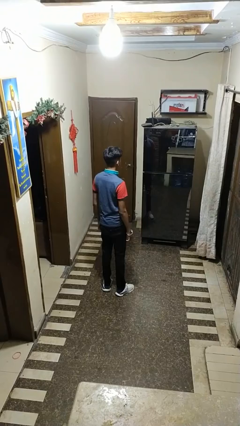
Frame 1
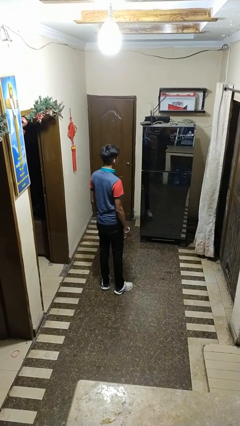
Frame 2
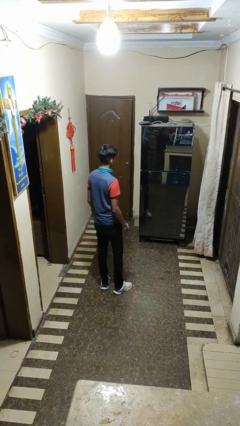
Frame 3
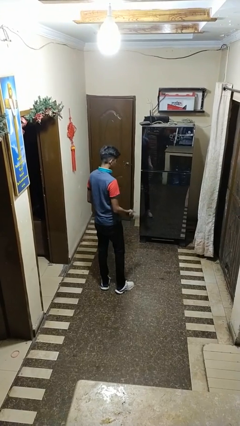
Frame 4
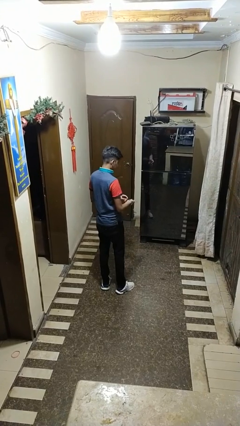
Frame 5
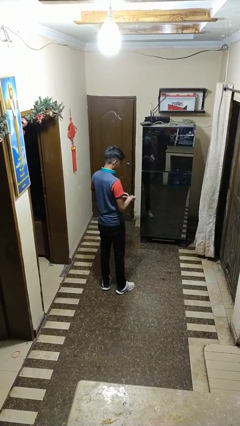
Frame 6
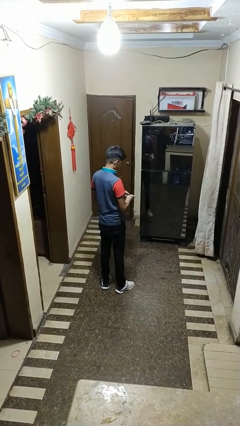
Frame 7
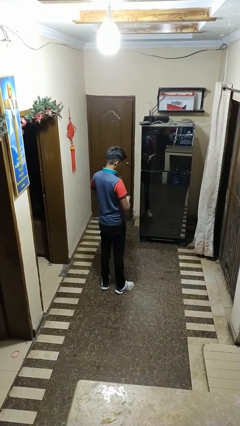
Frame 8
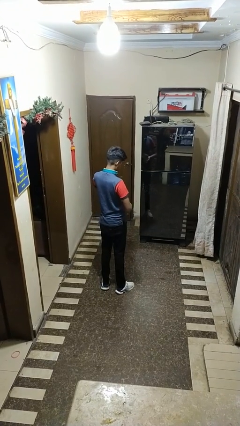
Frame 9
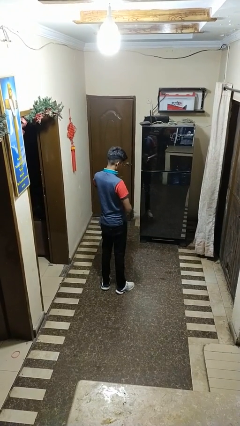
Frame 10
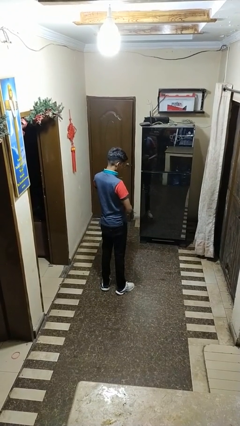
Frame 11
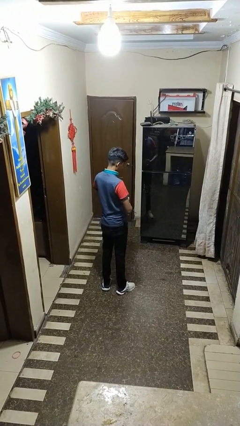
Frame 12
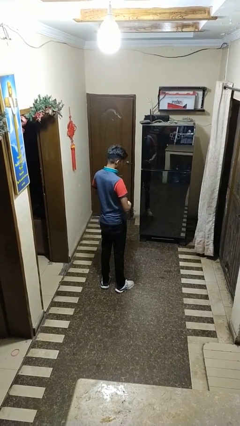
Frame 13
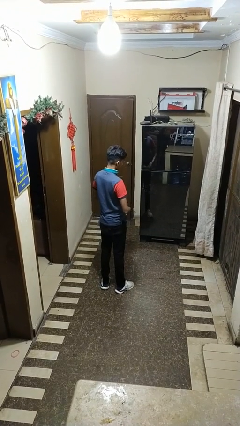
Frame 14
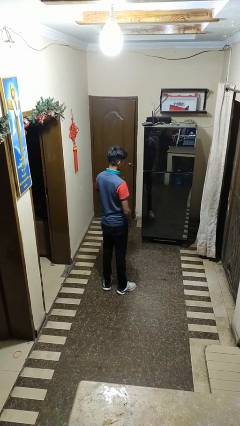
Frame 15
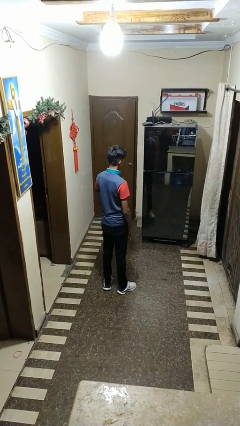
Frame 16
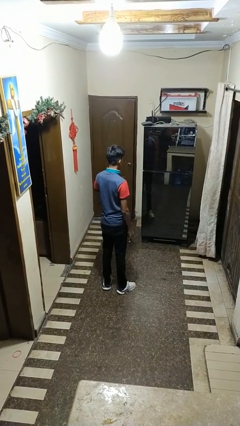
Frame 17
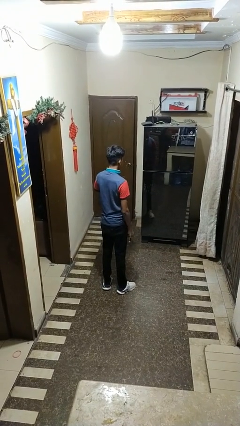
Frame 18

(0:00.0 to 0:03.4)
person takes off wristwatch

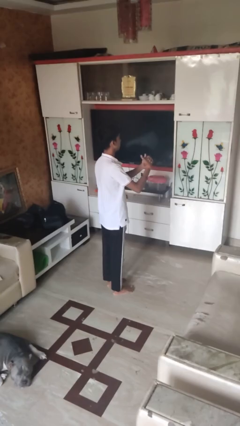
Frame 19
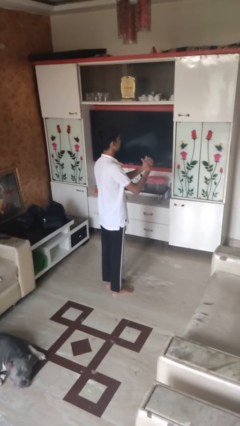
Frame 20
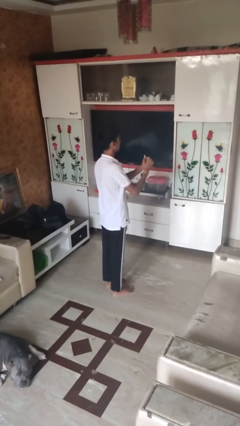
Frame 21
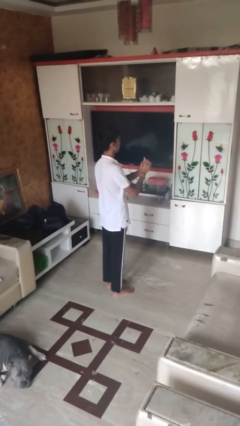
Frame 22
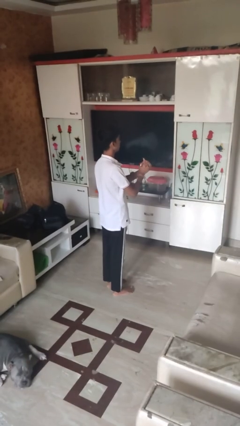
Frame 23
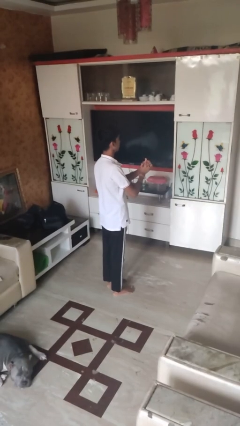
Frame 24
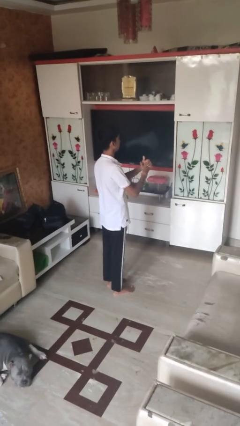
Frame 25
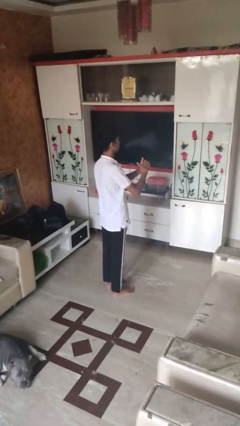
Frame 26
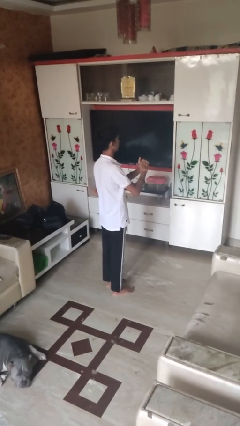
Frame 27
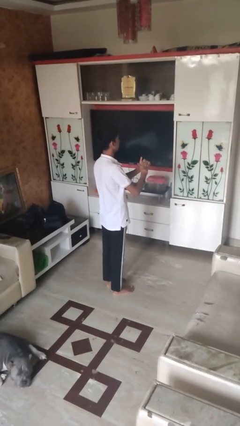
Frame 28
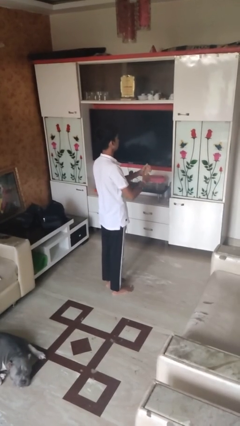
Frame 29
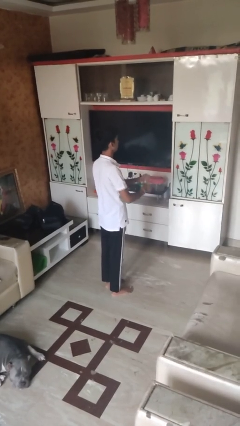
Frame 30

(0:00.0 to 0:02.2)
person cracks knuckles

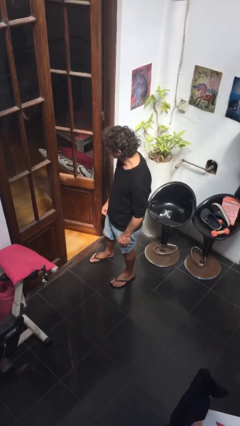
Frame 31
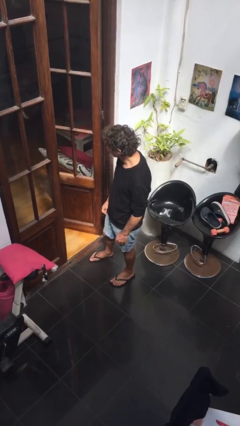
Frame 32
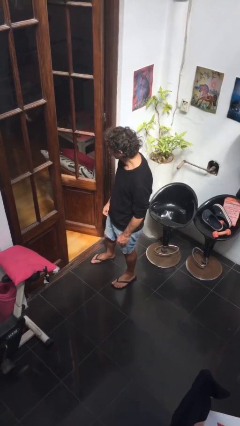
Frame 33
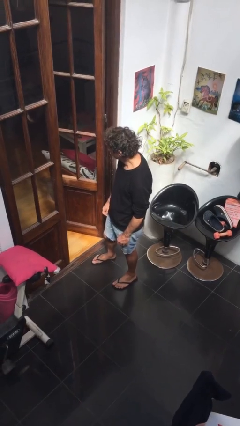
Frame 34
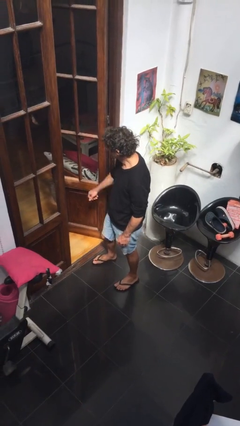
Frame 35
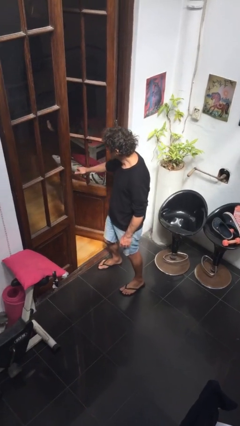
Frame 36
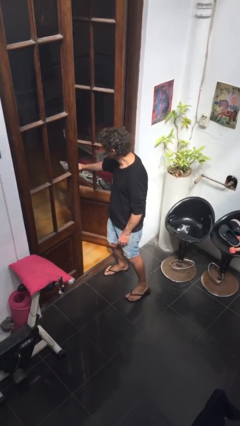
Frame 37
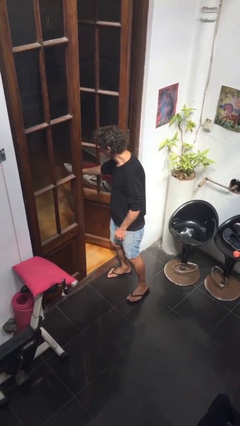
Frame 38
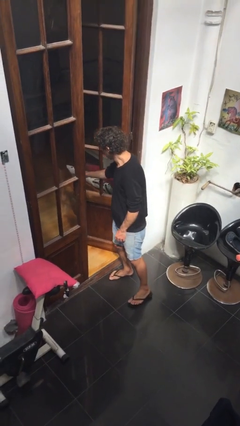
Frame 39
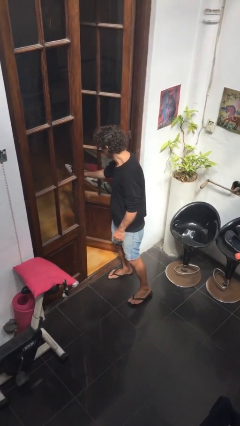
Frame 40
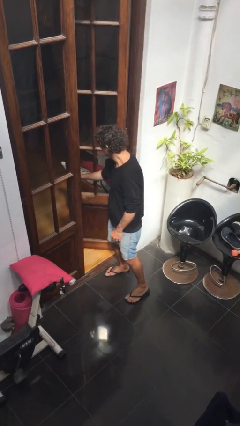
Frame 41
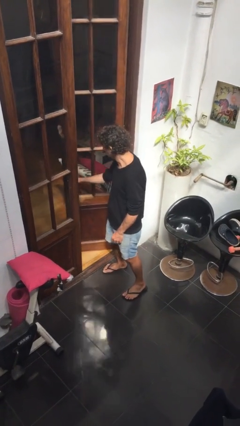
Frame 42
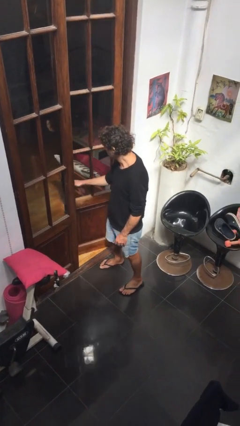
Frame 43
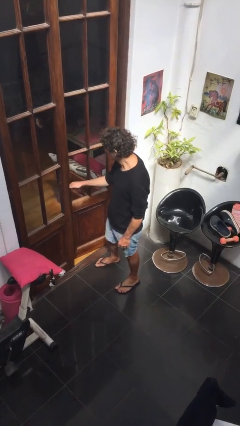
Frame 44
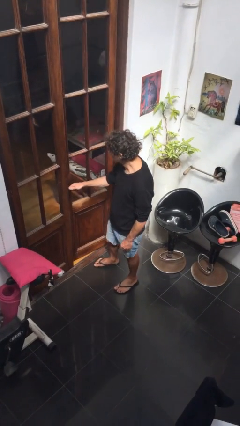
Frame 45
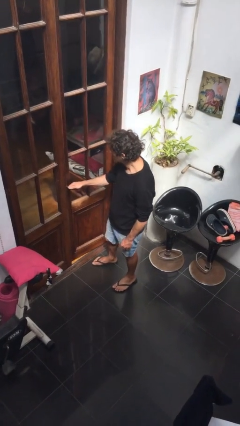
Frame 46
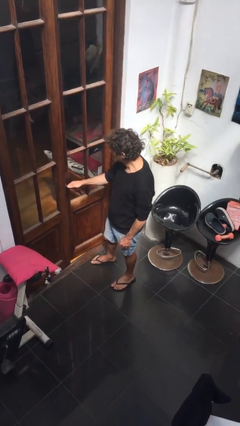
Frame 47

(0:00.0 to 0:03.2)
person closes facility door

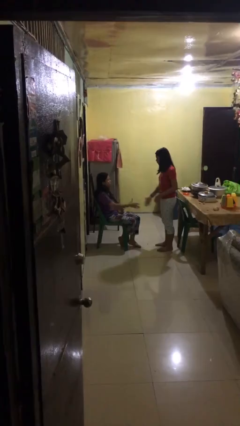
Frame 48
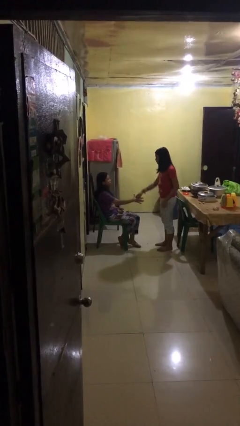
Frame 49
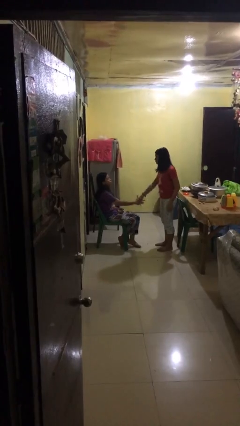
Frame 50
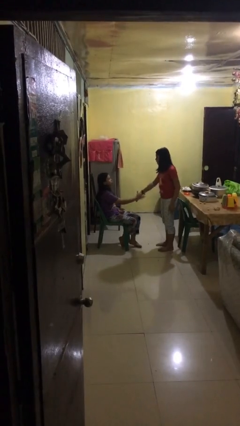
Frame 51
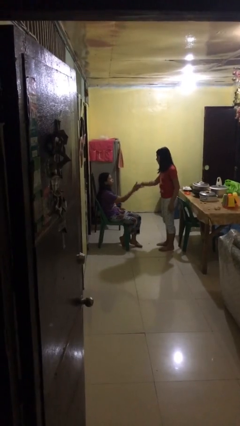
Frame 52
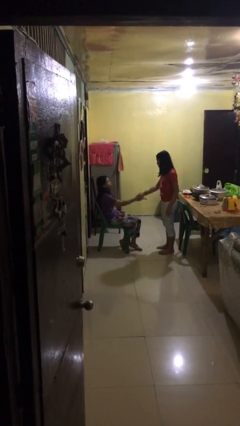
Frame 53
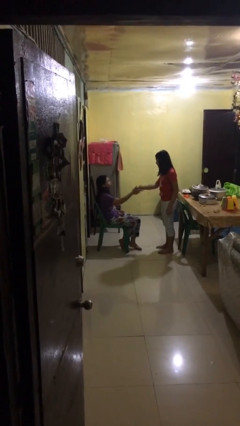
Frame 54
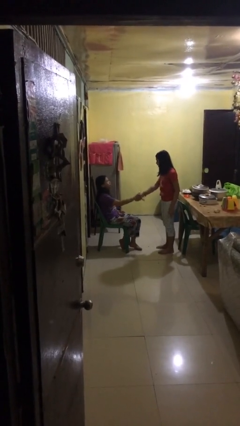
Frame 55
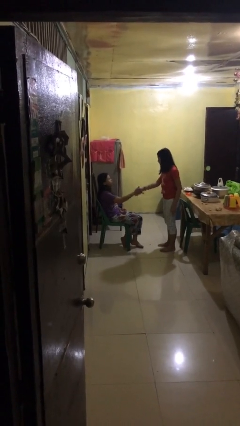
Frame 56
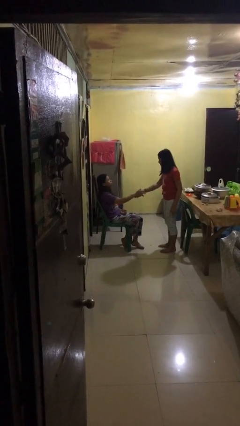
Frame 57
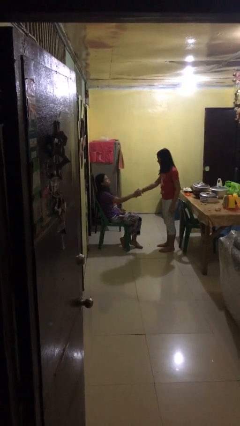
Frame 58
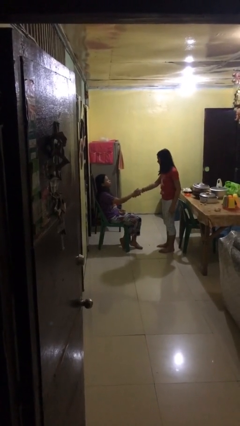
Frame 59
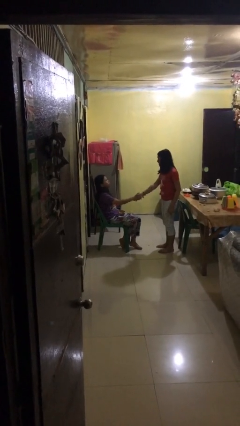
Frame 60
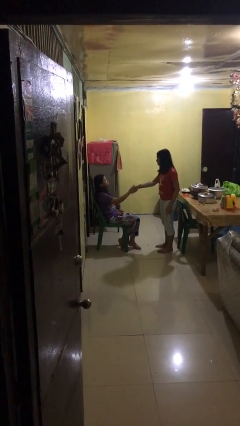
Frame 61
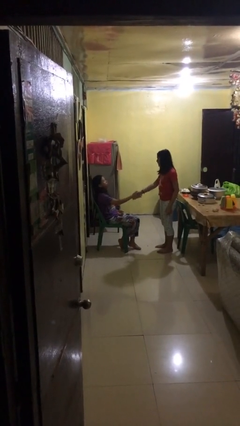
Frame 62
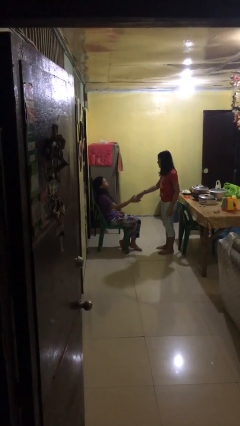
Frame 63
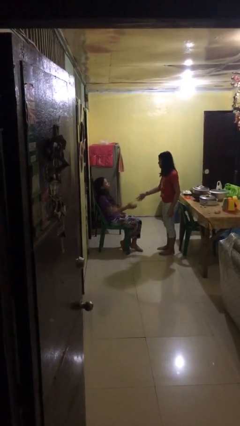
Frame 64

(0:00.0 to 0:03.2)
person shakes hand

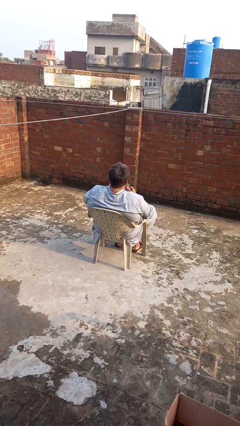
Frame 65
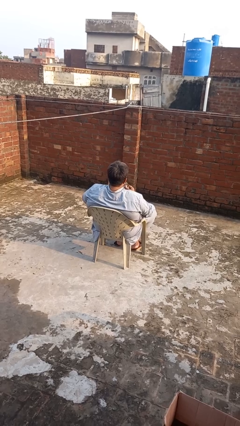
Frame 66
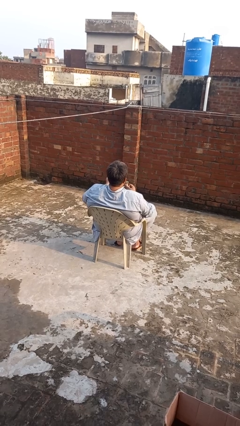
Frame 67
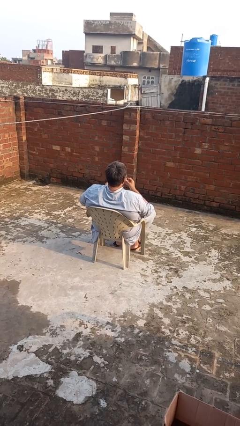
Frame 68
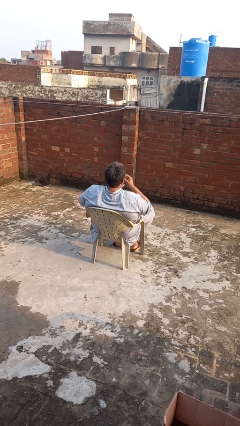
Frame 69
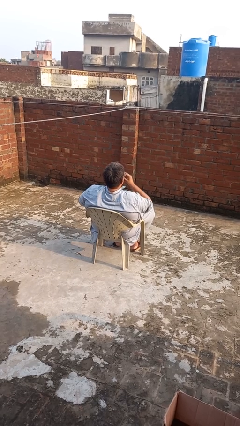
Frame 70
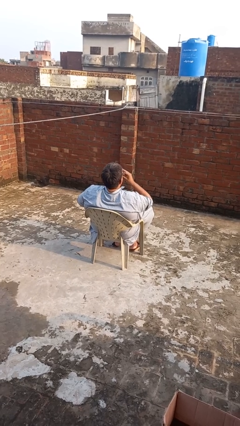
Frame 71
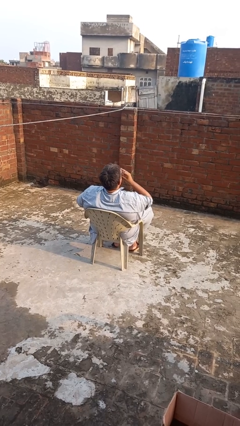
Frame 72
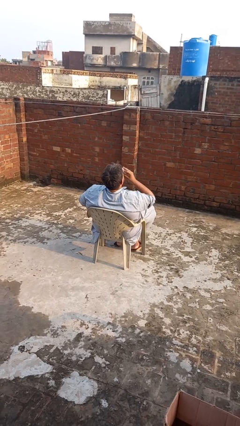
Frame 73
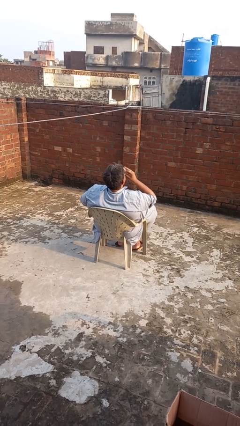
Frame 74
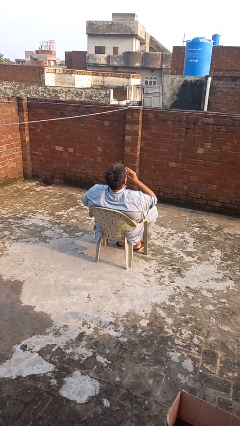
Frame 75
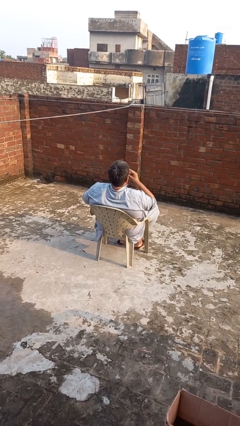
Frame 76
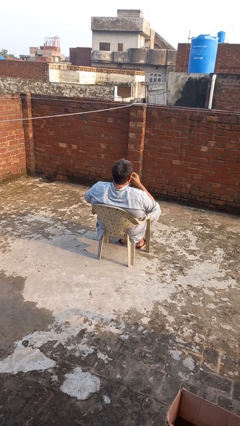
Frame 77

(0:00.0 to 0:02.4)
person drinks from mug

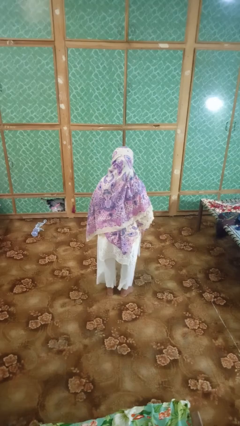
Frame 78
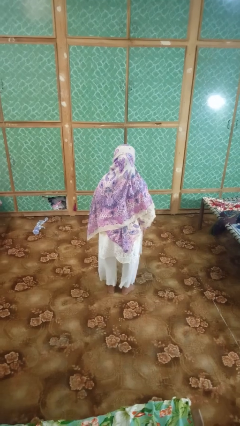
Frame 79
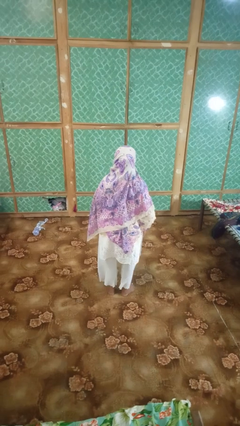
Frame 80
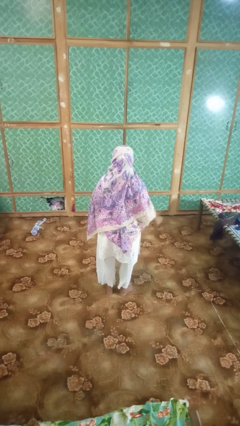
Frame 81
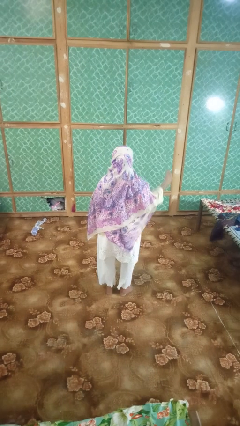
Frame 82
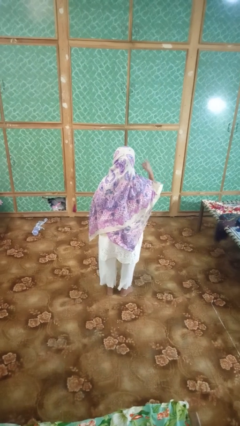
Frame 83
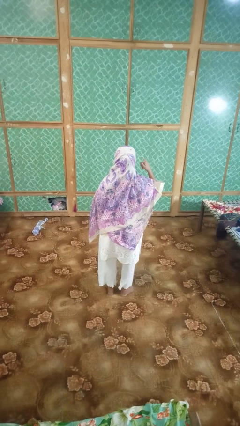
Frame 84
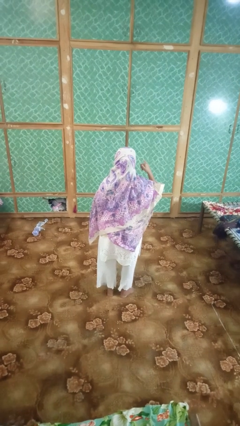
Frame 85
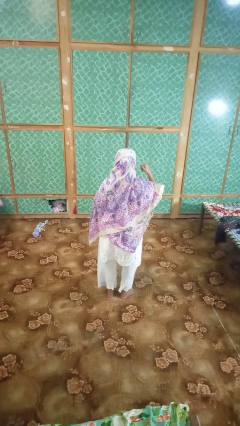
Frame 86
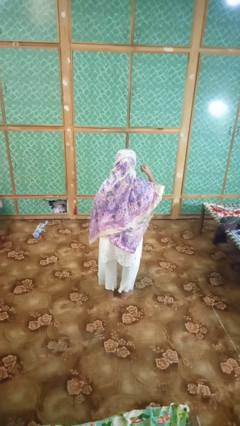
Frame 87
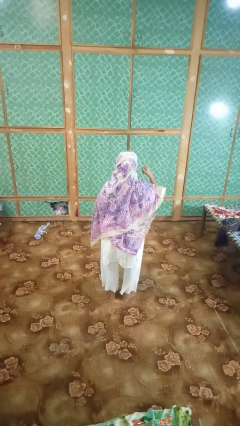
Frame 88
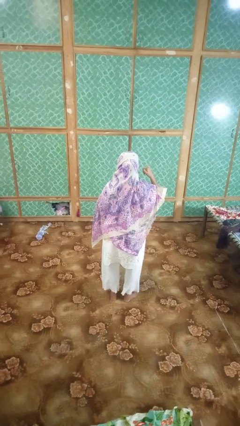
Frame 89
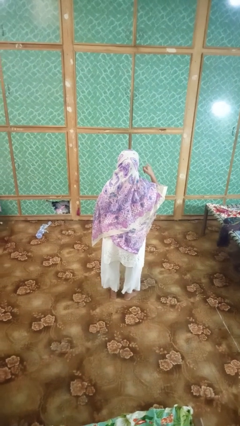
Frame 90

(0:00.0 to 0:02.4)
person gestures call me

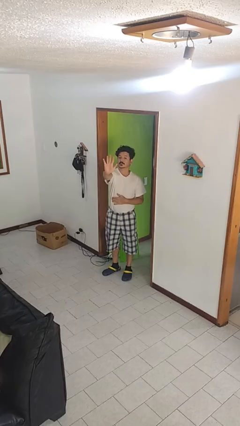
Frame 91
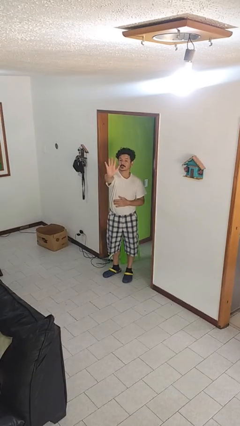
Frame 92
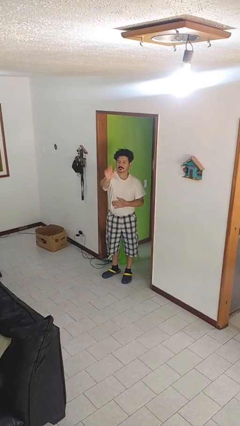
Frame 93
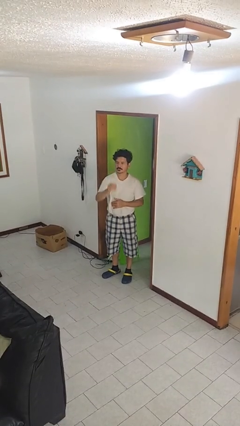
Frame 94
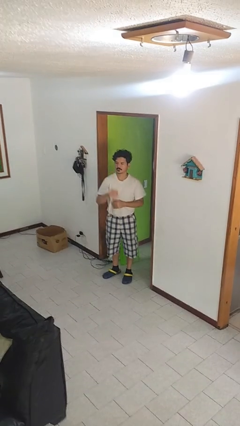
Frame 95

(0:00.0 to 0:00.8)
person gestures stop
